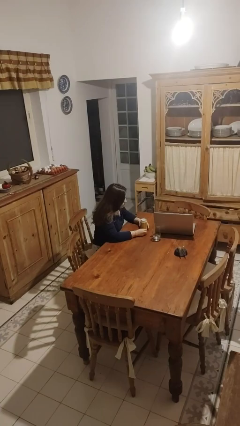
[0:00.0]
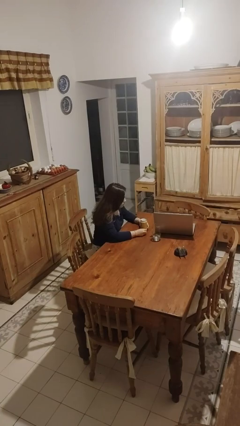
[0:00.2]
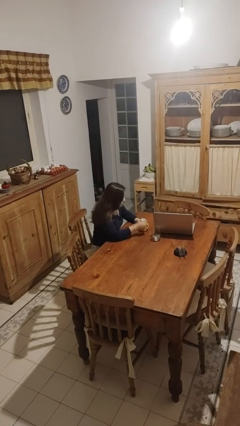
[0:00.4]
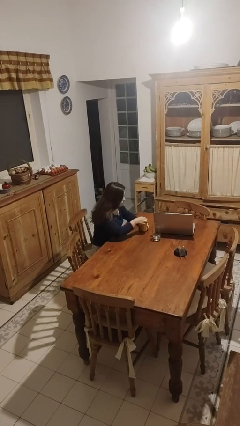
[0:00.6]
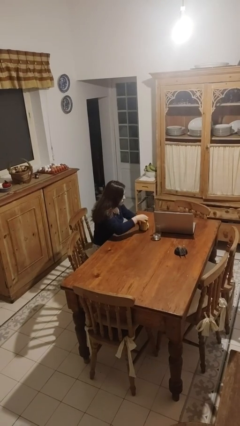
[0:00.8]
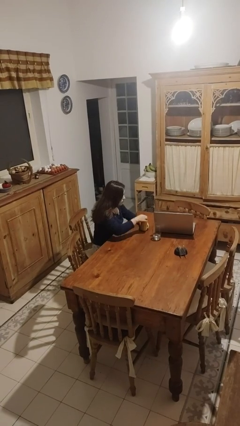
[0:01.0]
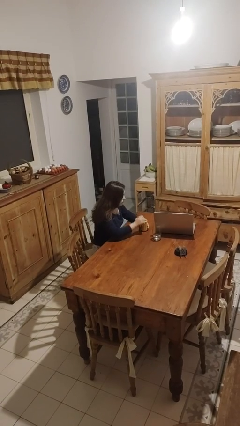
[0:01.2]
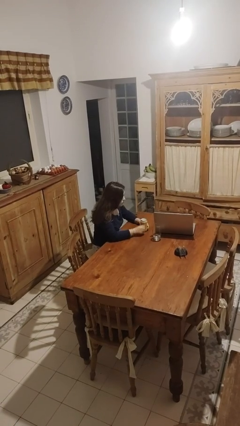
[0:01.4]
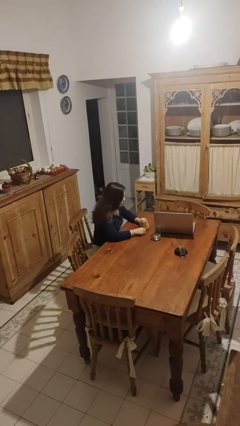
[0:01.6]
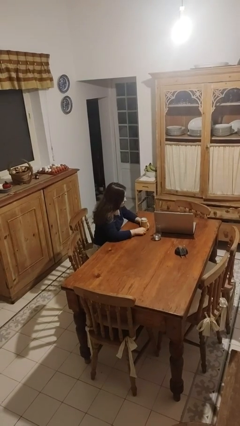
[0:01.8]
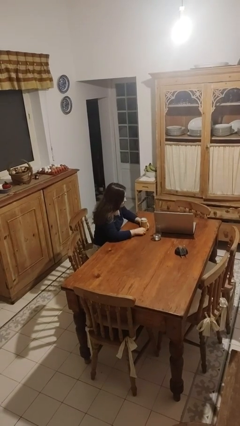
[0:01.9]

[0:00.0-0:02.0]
person opens beverage can

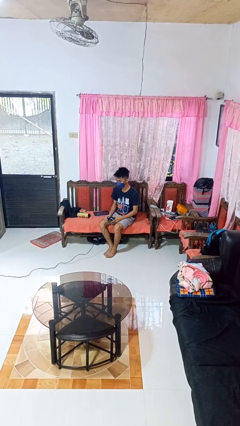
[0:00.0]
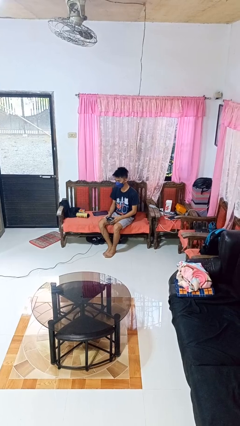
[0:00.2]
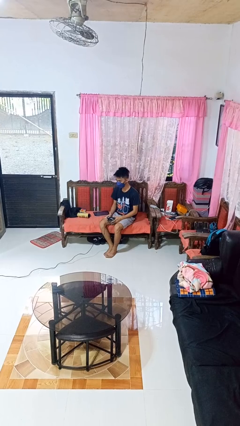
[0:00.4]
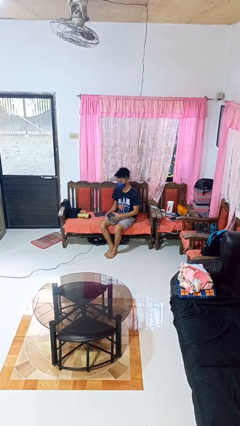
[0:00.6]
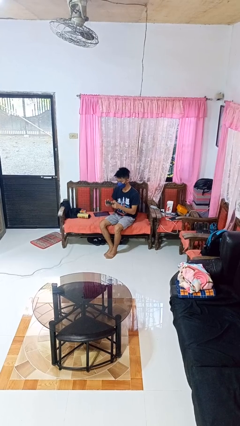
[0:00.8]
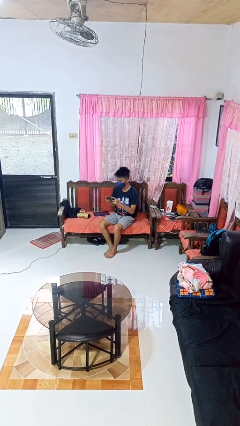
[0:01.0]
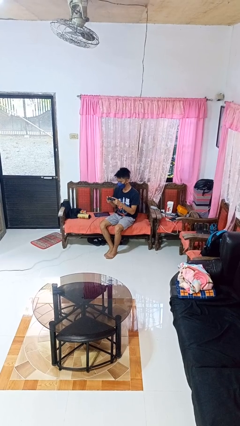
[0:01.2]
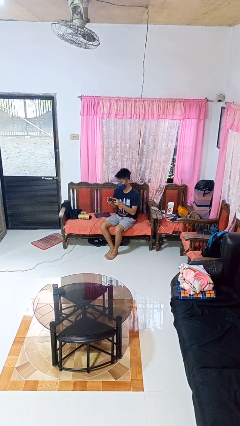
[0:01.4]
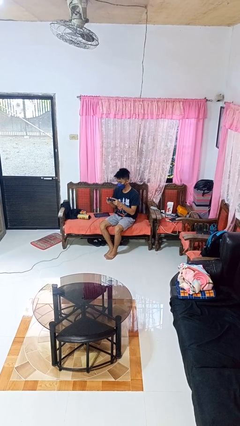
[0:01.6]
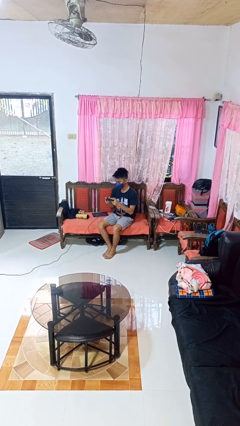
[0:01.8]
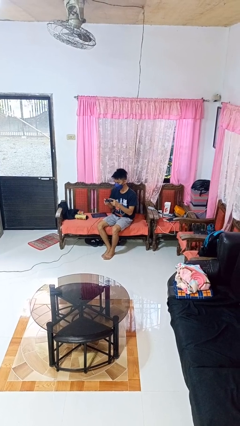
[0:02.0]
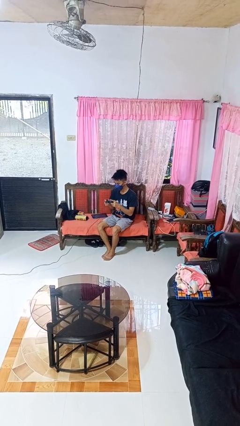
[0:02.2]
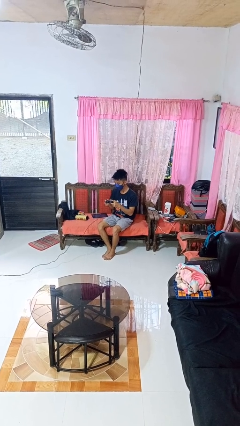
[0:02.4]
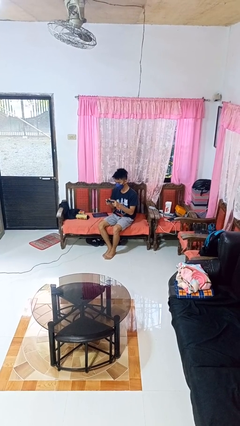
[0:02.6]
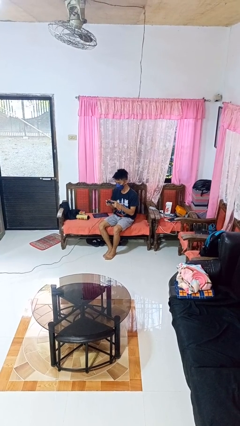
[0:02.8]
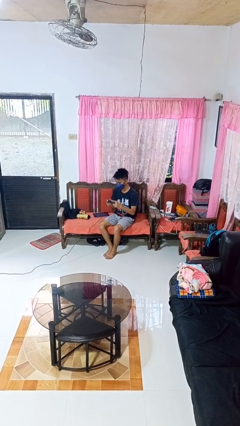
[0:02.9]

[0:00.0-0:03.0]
person interacts with handheld game

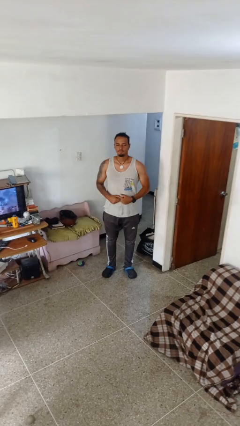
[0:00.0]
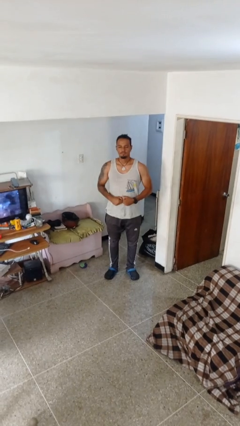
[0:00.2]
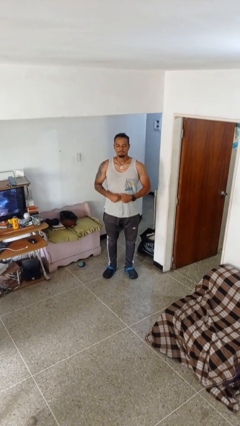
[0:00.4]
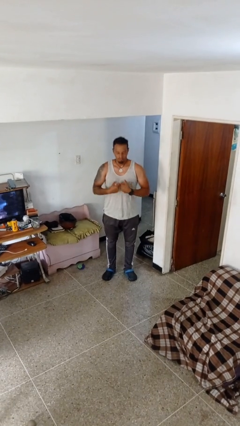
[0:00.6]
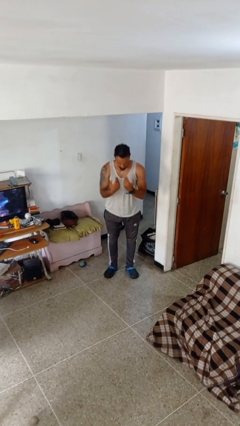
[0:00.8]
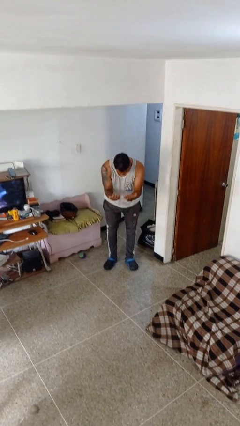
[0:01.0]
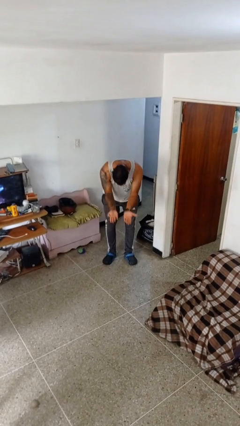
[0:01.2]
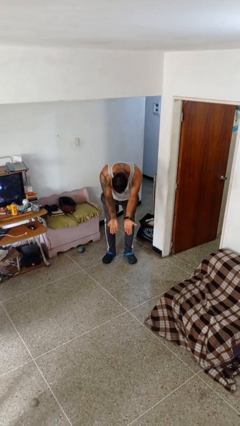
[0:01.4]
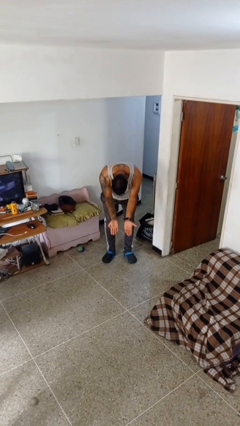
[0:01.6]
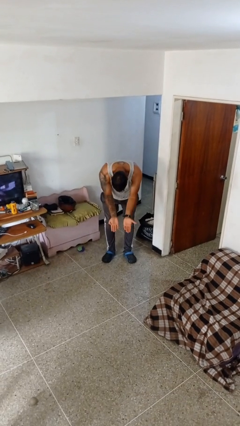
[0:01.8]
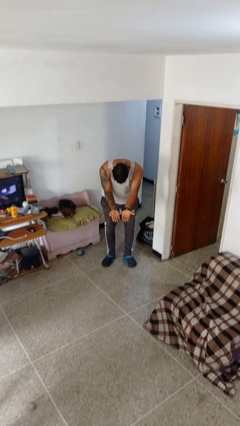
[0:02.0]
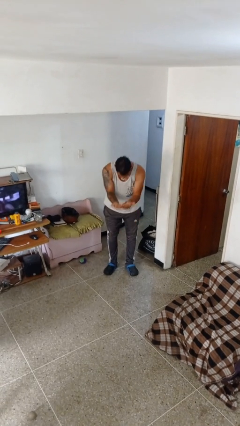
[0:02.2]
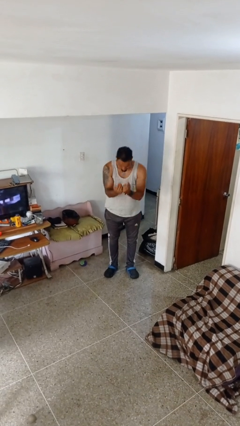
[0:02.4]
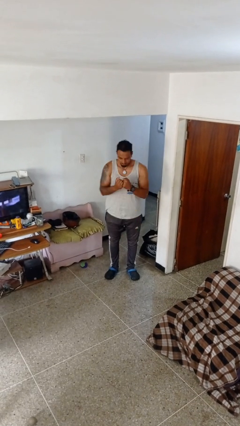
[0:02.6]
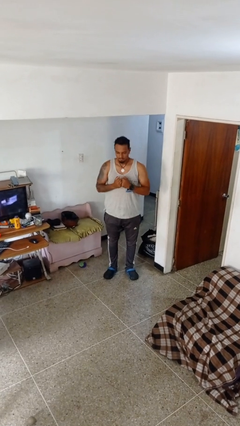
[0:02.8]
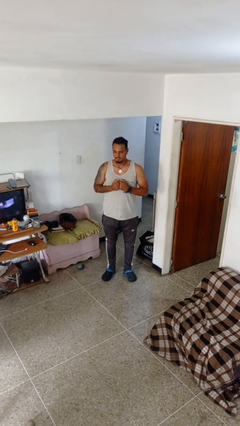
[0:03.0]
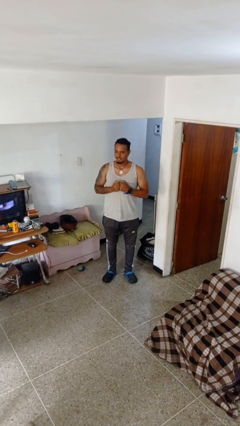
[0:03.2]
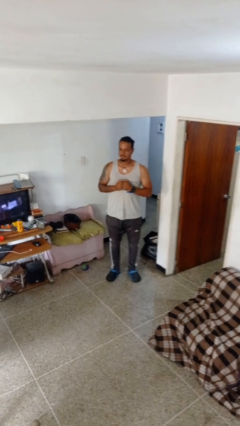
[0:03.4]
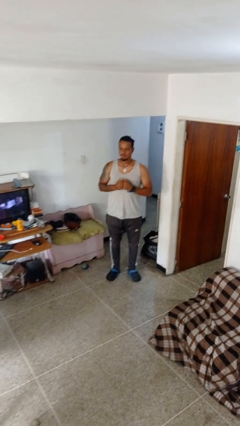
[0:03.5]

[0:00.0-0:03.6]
person bows

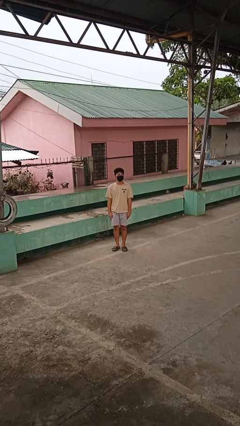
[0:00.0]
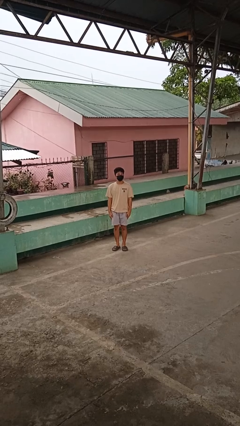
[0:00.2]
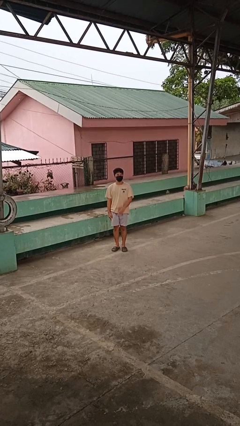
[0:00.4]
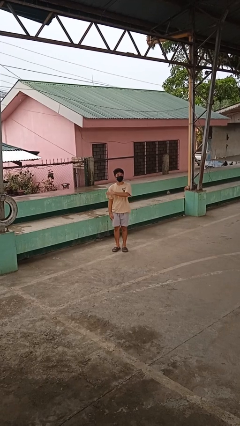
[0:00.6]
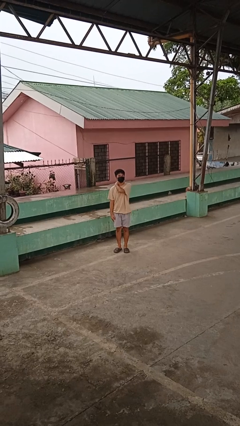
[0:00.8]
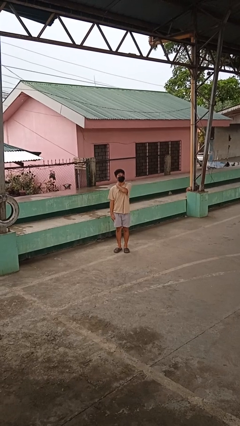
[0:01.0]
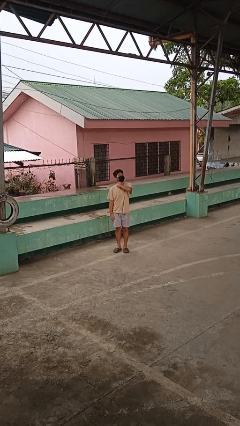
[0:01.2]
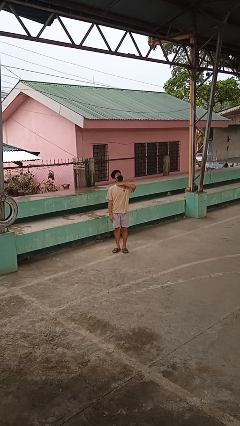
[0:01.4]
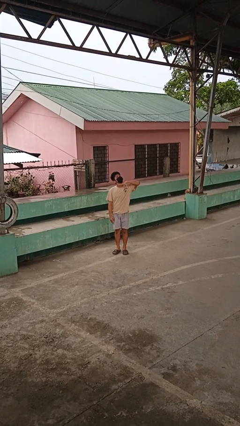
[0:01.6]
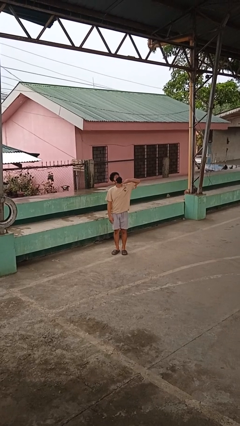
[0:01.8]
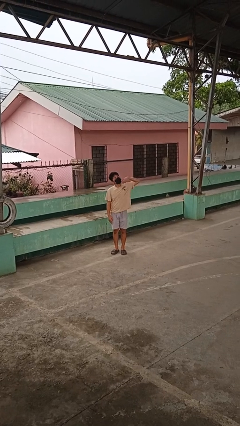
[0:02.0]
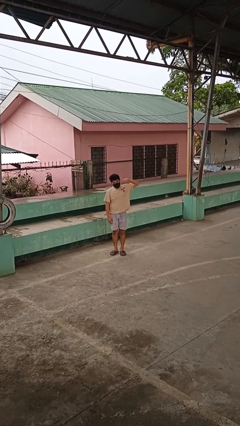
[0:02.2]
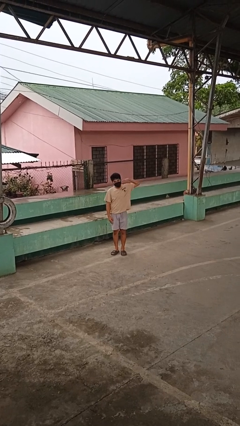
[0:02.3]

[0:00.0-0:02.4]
person gestures cut

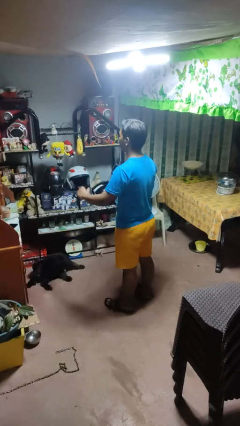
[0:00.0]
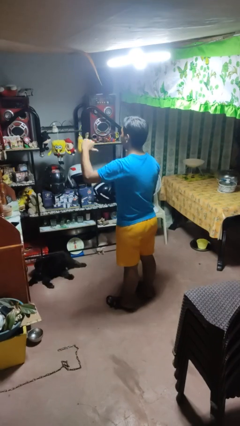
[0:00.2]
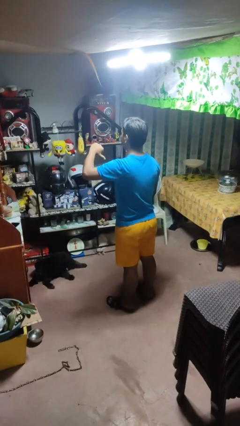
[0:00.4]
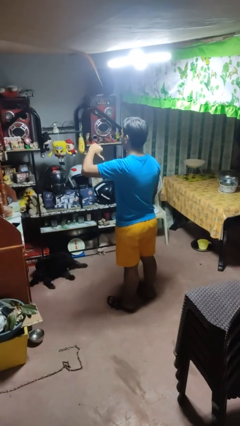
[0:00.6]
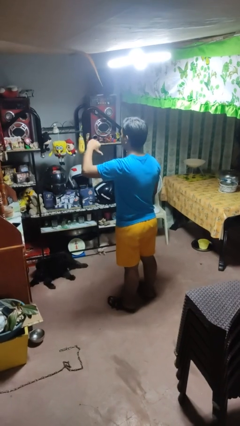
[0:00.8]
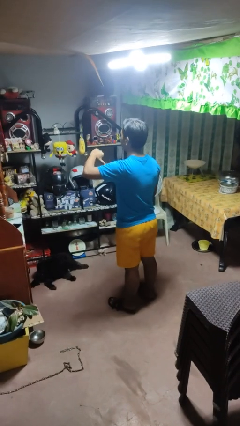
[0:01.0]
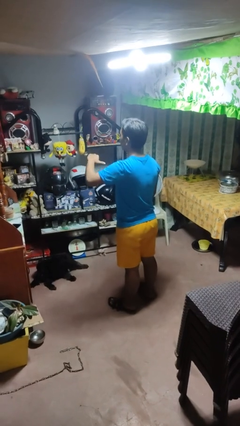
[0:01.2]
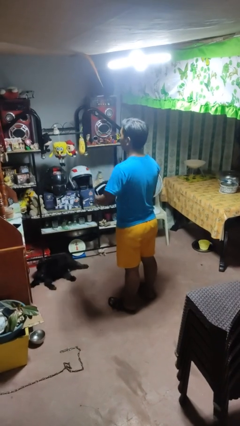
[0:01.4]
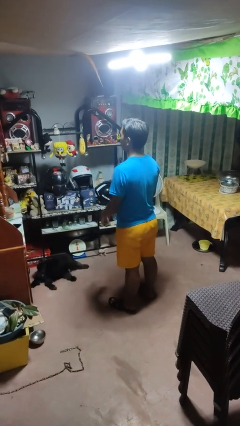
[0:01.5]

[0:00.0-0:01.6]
person gestures thumbs down

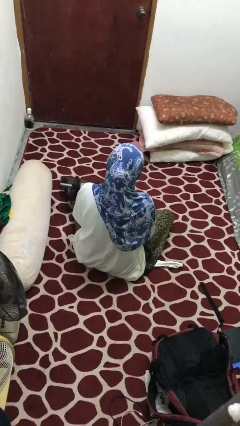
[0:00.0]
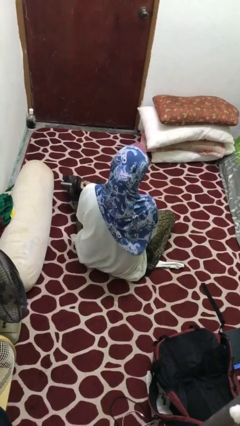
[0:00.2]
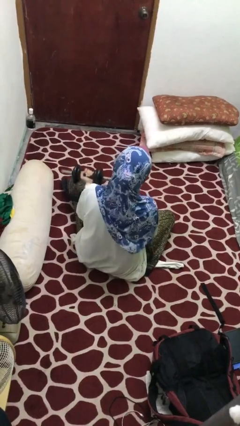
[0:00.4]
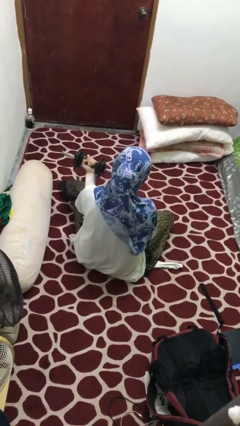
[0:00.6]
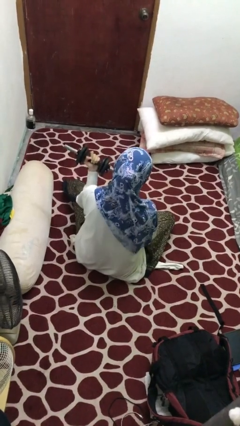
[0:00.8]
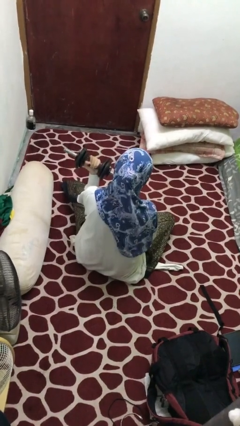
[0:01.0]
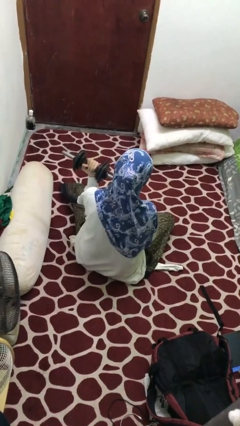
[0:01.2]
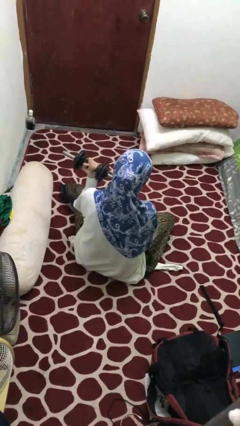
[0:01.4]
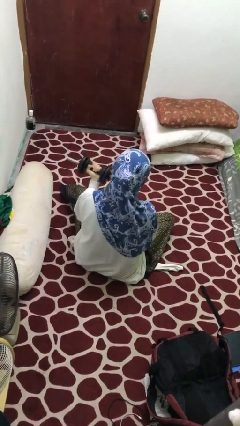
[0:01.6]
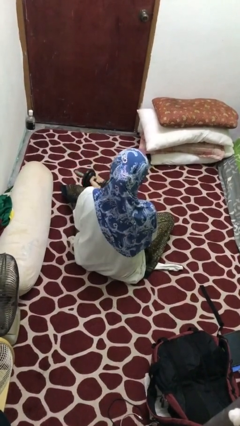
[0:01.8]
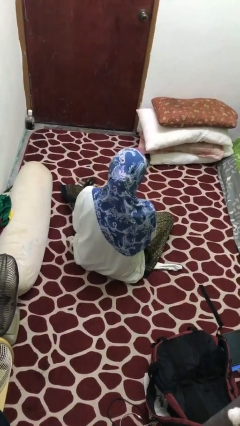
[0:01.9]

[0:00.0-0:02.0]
person lifts dumbbells

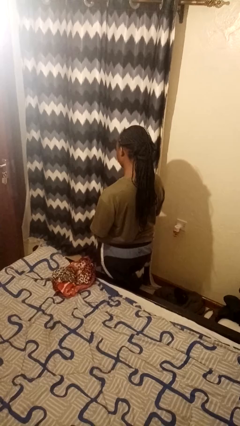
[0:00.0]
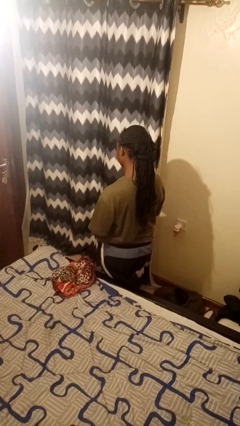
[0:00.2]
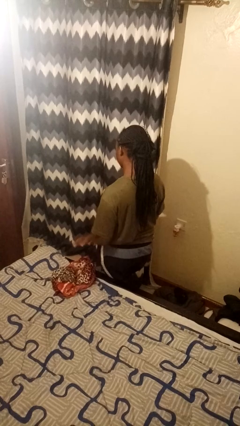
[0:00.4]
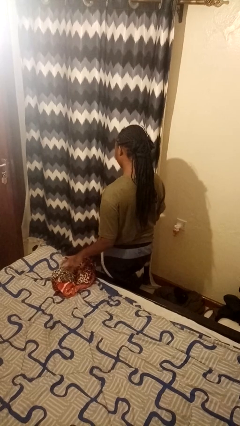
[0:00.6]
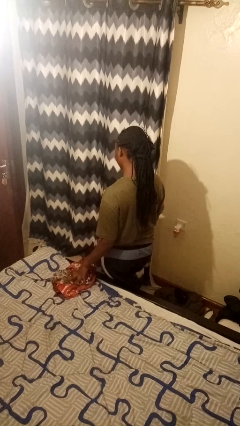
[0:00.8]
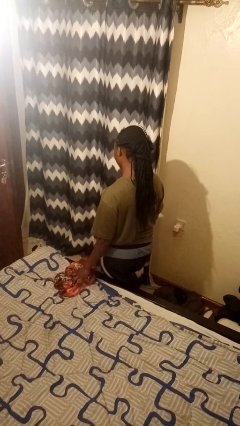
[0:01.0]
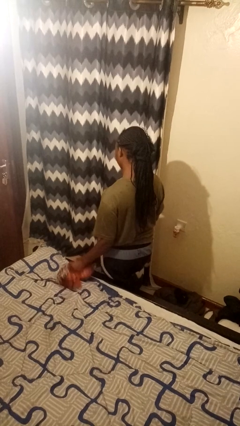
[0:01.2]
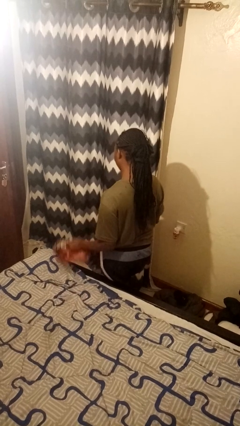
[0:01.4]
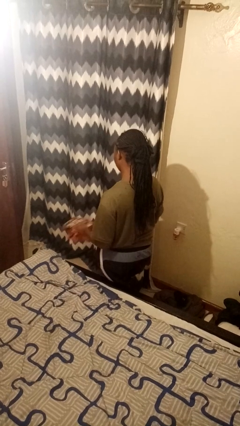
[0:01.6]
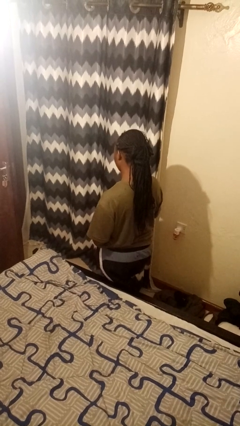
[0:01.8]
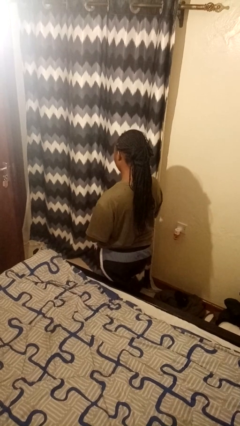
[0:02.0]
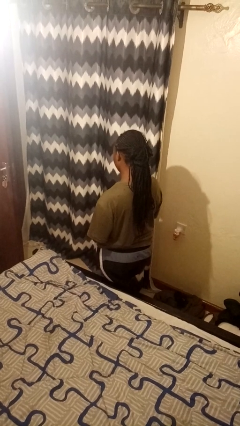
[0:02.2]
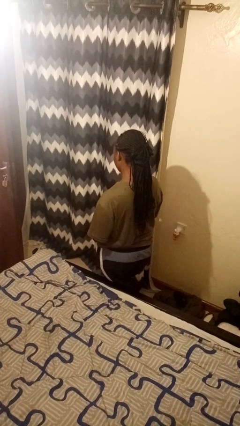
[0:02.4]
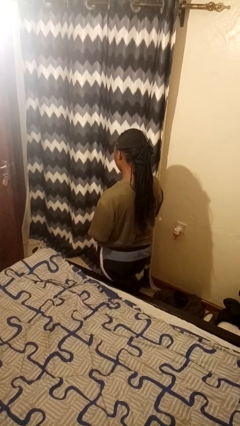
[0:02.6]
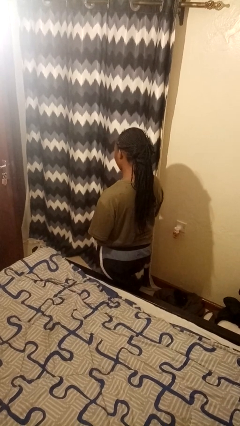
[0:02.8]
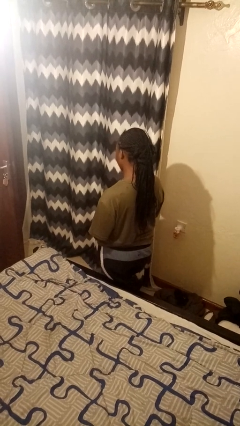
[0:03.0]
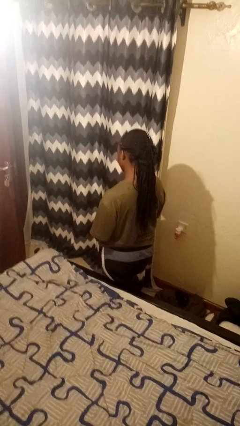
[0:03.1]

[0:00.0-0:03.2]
person picks up object from bed
